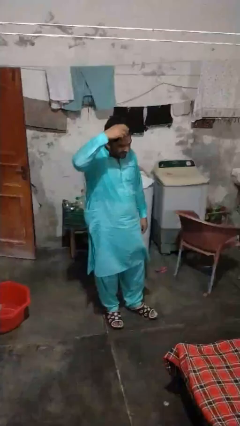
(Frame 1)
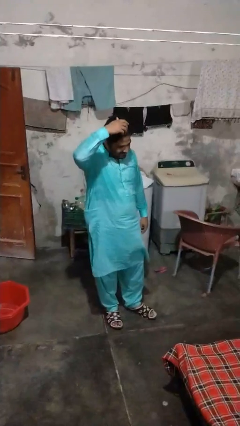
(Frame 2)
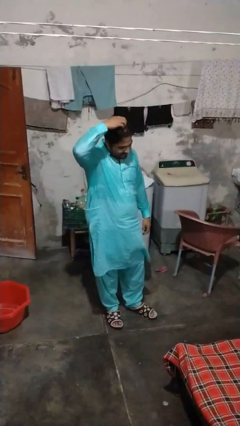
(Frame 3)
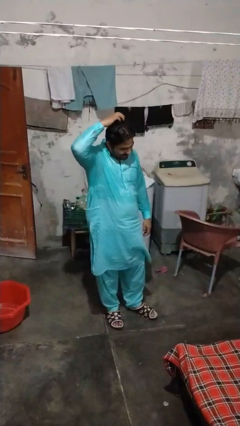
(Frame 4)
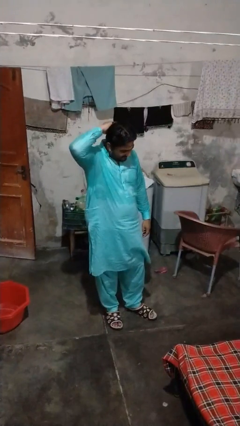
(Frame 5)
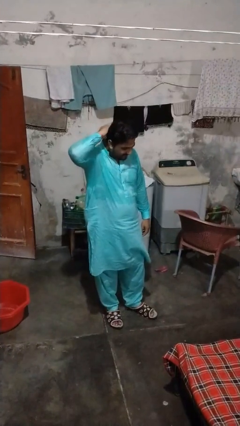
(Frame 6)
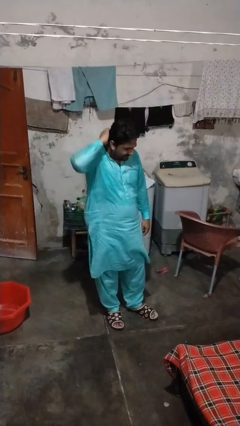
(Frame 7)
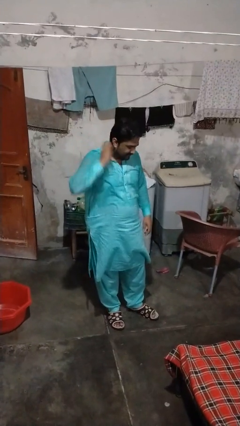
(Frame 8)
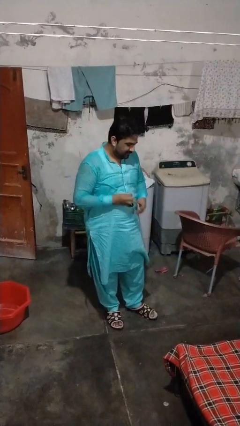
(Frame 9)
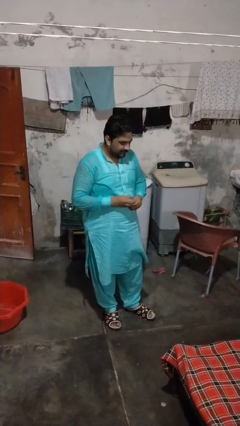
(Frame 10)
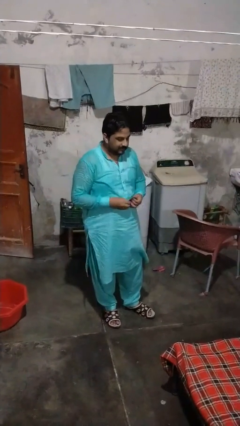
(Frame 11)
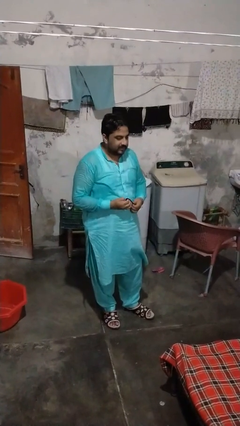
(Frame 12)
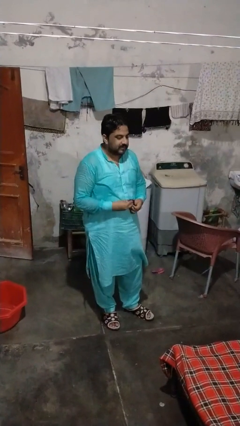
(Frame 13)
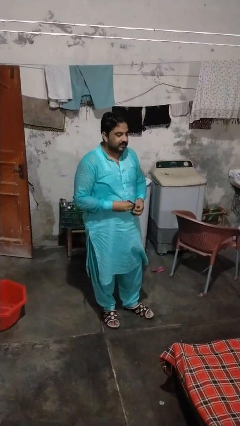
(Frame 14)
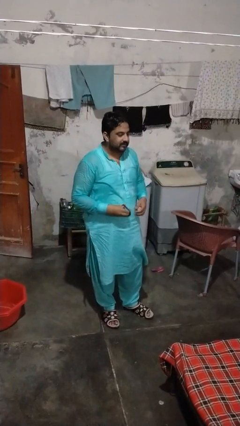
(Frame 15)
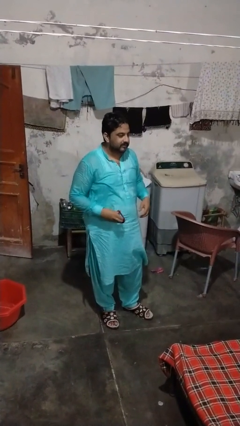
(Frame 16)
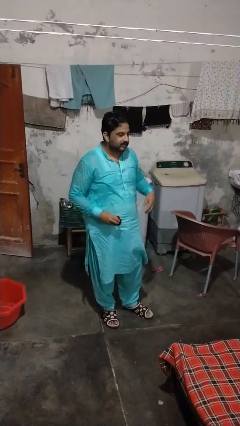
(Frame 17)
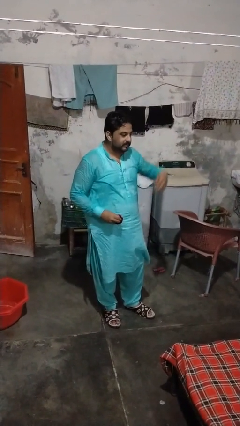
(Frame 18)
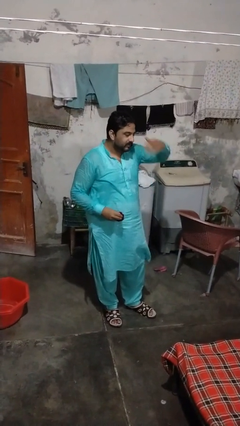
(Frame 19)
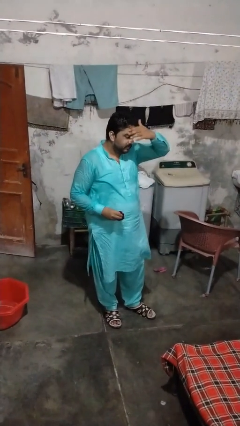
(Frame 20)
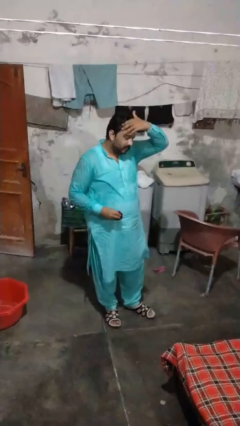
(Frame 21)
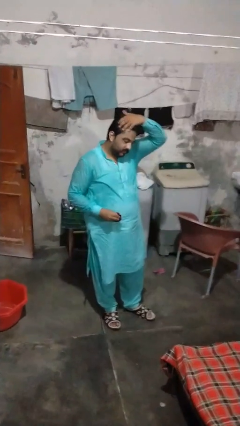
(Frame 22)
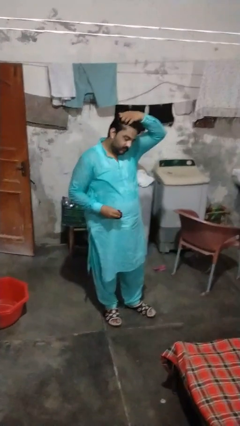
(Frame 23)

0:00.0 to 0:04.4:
person takes off hairtie

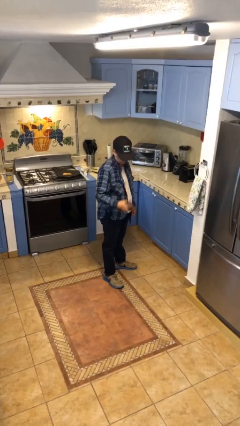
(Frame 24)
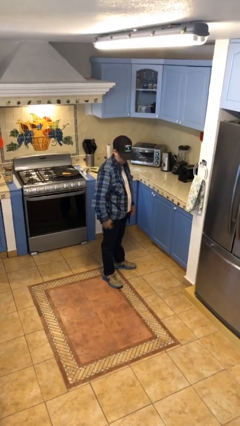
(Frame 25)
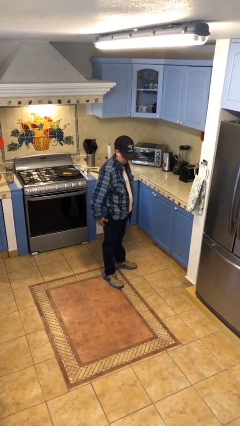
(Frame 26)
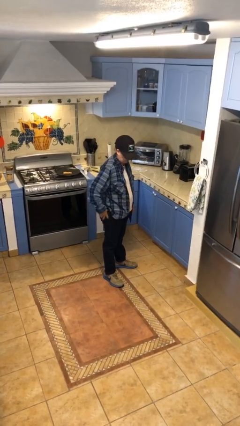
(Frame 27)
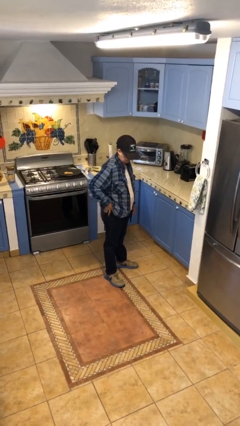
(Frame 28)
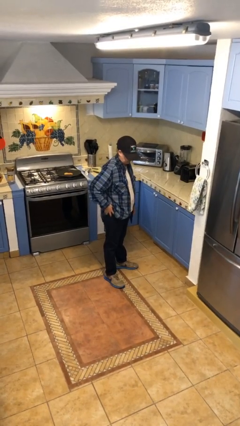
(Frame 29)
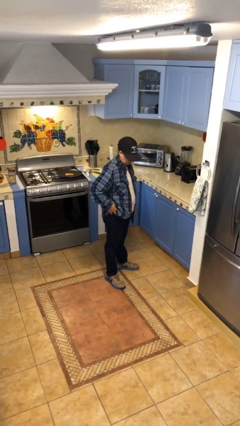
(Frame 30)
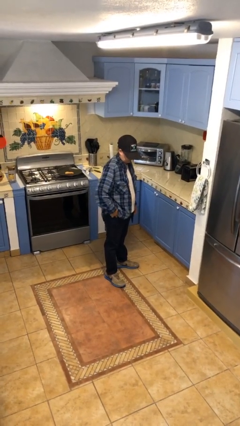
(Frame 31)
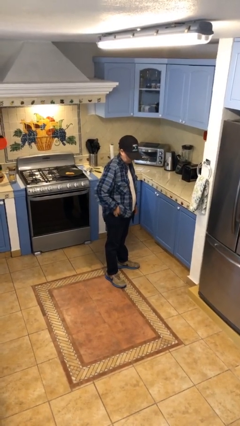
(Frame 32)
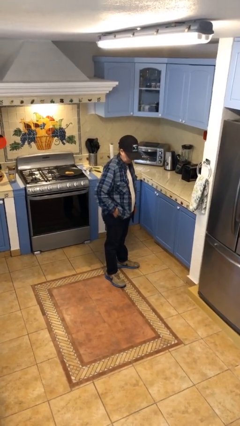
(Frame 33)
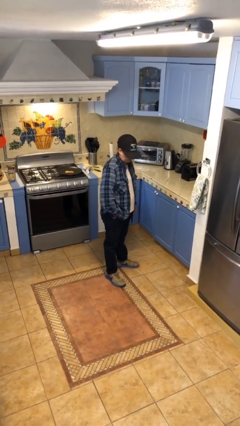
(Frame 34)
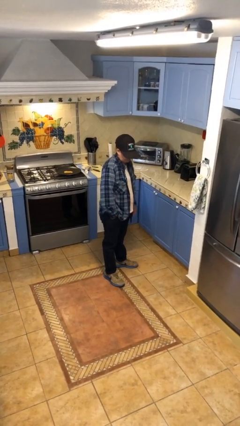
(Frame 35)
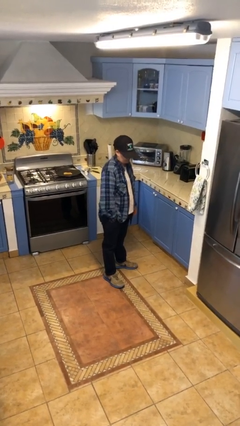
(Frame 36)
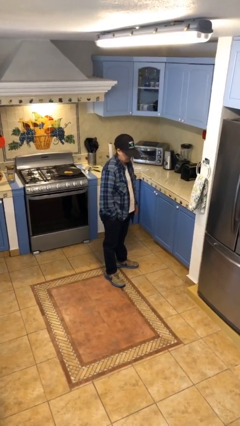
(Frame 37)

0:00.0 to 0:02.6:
person puts phone into pocket

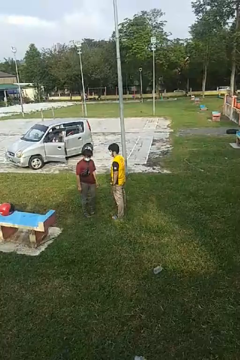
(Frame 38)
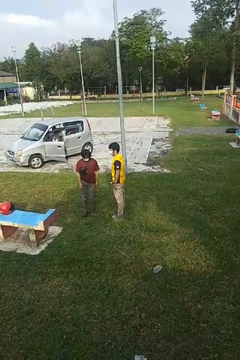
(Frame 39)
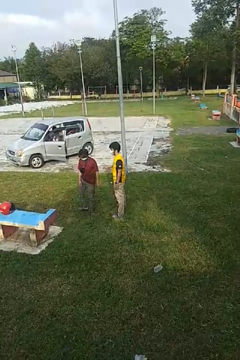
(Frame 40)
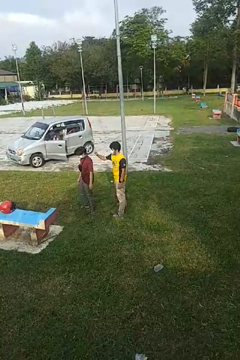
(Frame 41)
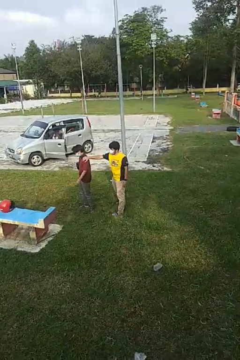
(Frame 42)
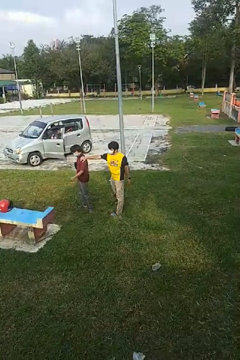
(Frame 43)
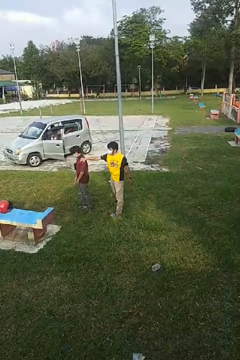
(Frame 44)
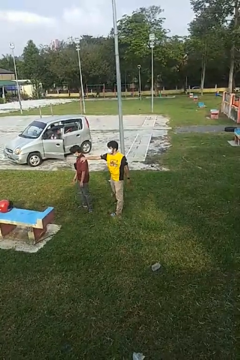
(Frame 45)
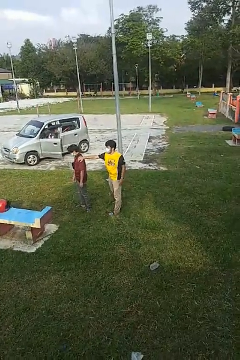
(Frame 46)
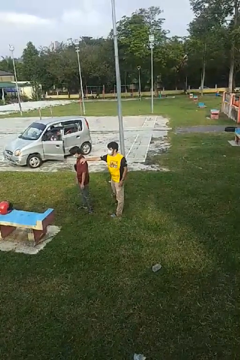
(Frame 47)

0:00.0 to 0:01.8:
person grabs person by shoulder

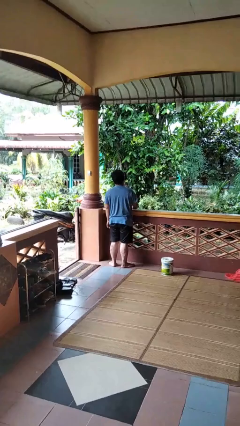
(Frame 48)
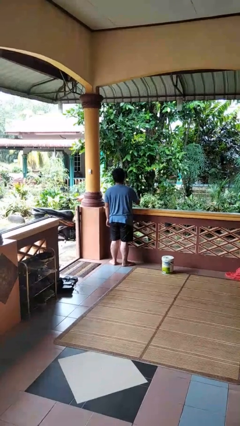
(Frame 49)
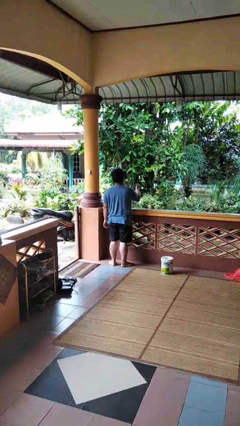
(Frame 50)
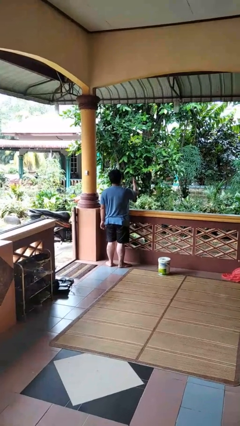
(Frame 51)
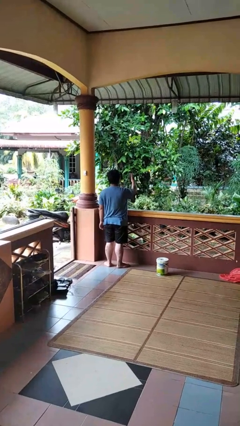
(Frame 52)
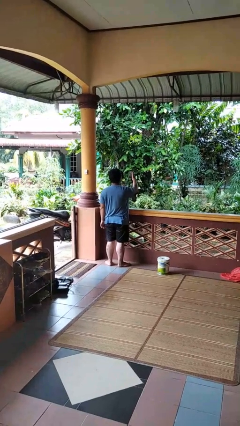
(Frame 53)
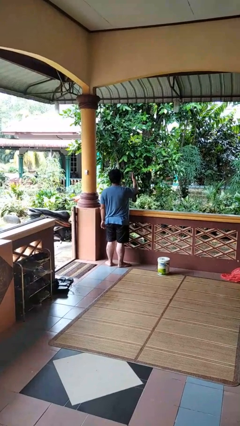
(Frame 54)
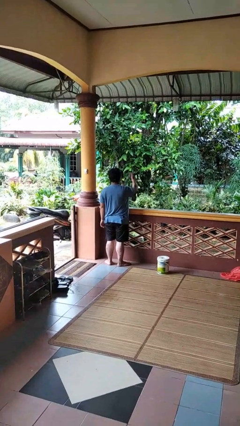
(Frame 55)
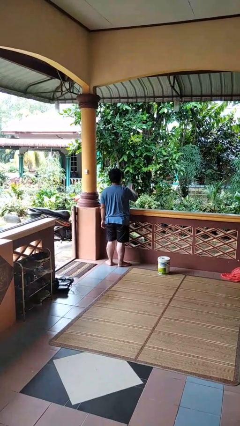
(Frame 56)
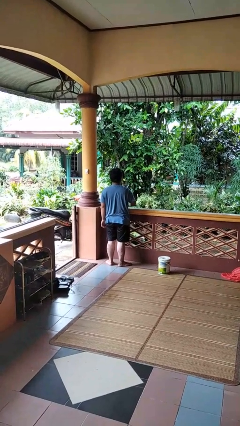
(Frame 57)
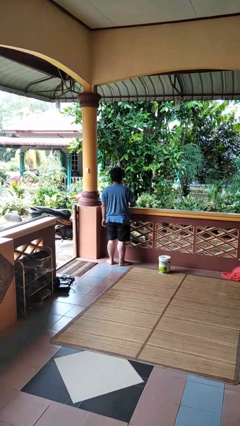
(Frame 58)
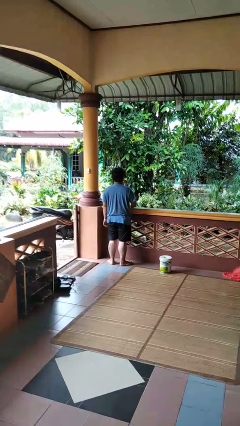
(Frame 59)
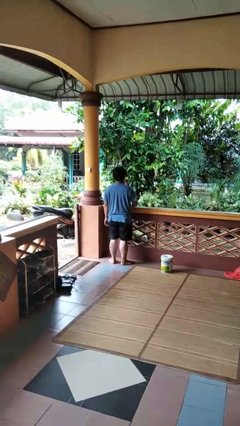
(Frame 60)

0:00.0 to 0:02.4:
person takes selfie

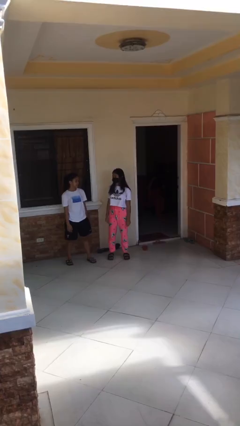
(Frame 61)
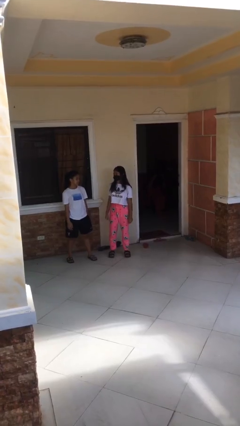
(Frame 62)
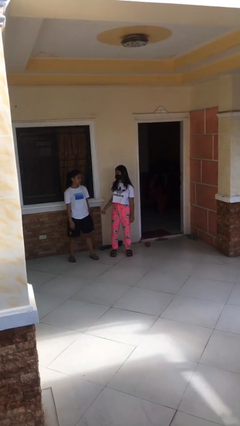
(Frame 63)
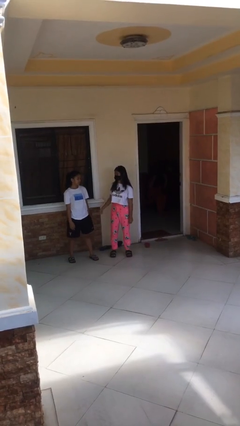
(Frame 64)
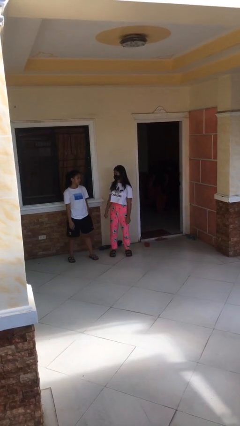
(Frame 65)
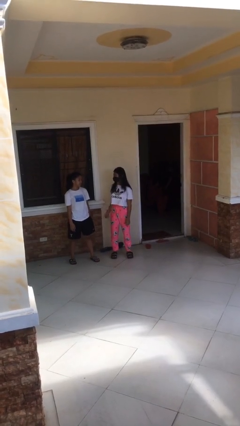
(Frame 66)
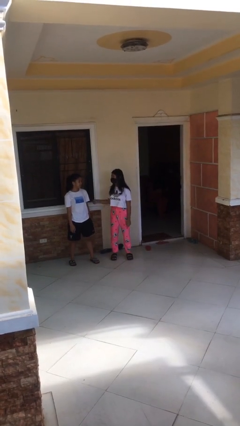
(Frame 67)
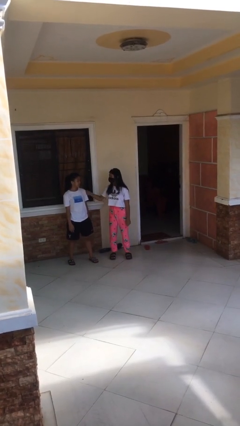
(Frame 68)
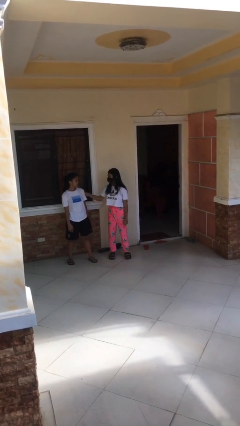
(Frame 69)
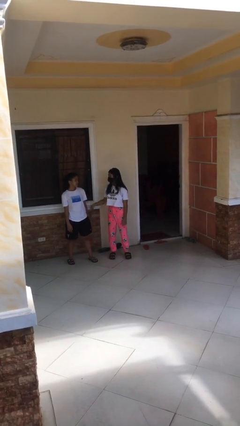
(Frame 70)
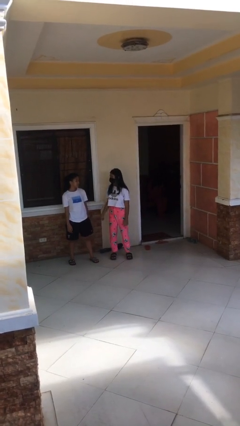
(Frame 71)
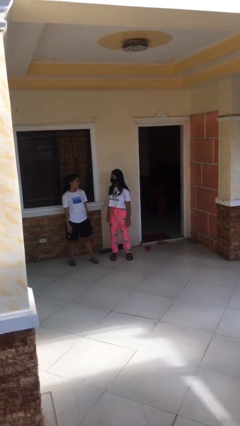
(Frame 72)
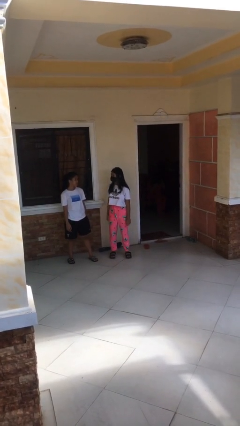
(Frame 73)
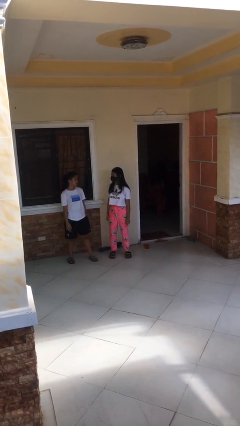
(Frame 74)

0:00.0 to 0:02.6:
person pounds shoulders of person

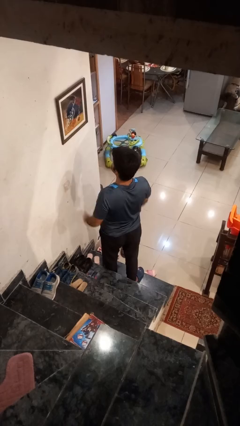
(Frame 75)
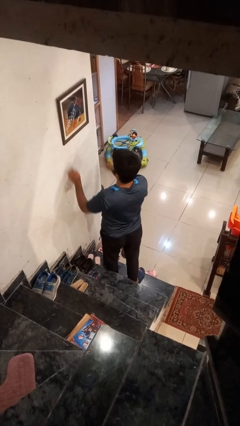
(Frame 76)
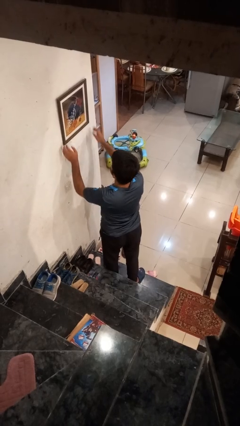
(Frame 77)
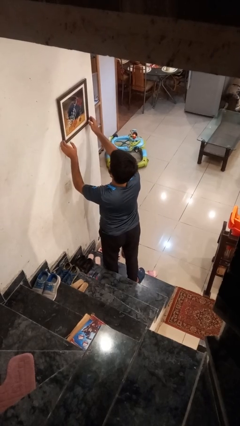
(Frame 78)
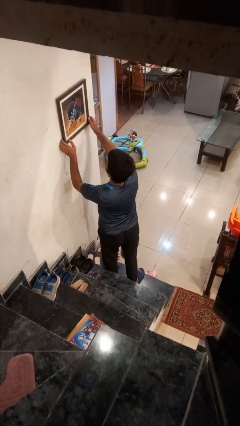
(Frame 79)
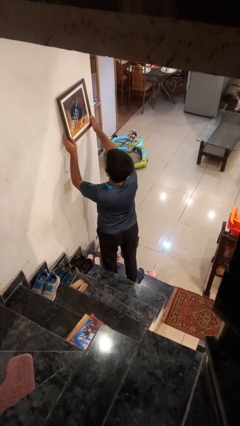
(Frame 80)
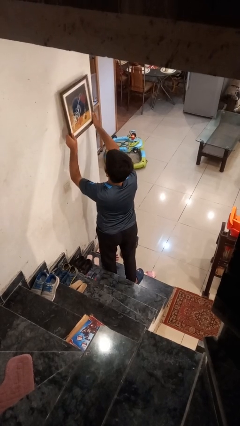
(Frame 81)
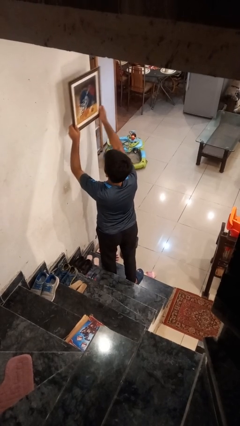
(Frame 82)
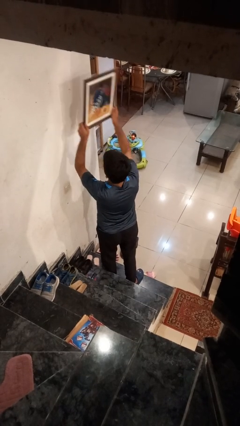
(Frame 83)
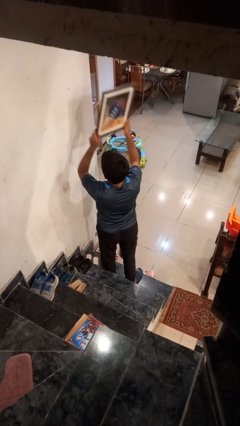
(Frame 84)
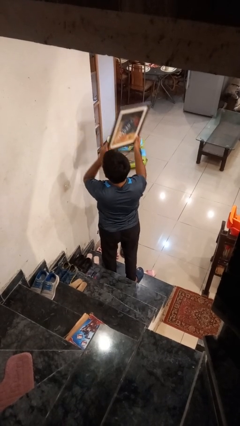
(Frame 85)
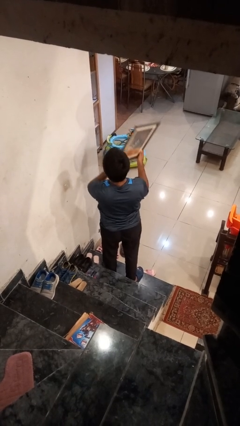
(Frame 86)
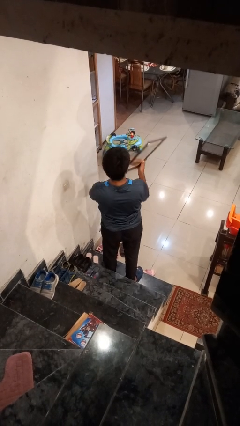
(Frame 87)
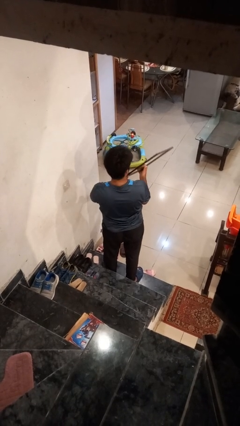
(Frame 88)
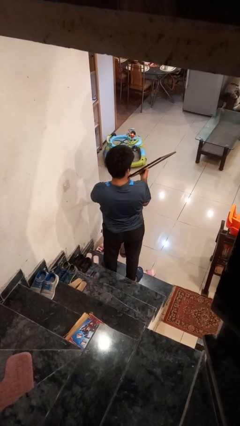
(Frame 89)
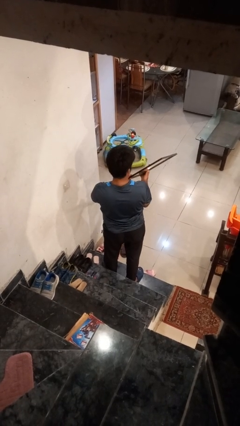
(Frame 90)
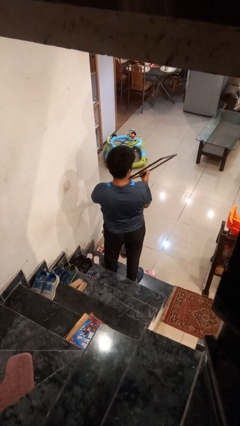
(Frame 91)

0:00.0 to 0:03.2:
person takes down picture frame

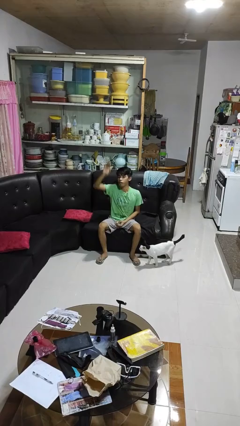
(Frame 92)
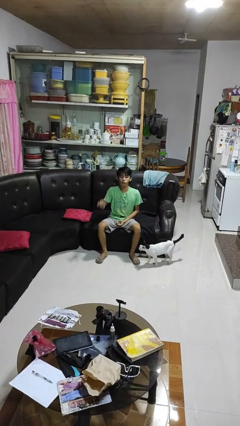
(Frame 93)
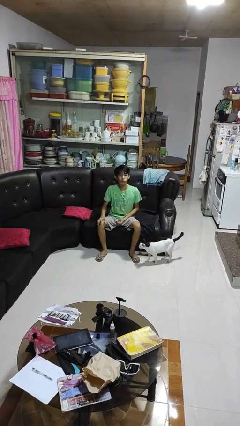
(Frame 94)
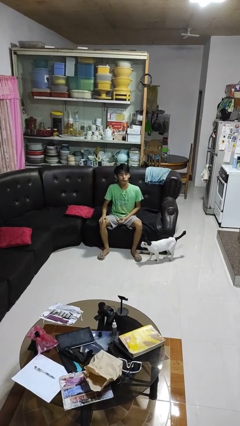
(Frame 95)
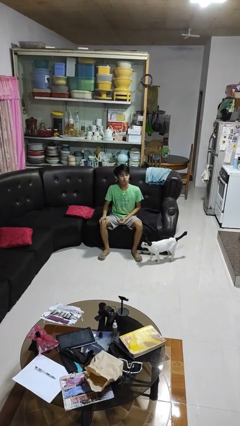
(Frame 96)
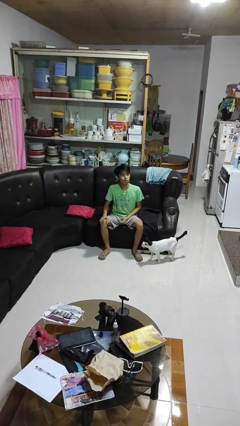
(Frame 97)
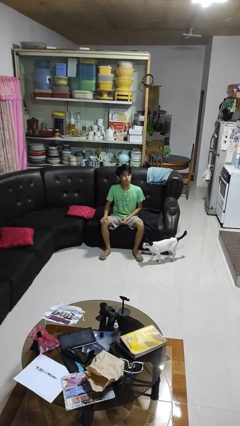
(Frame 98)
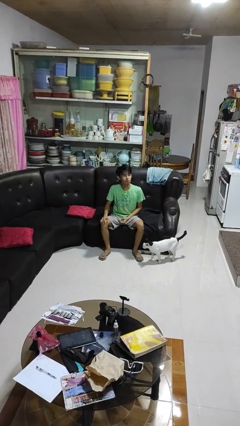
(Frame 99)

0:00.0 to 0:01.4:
person gestures lower hand
